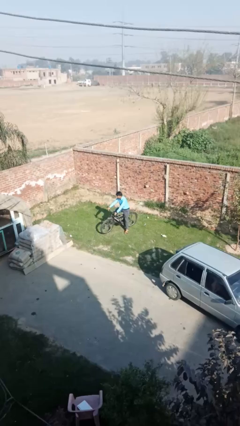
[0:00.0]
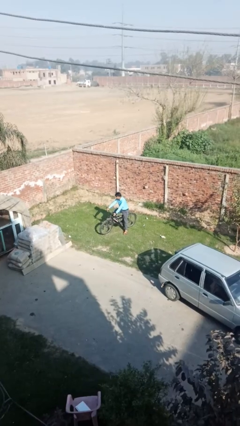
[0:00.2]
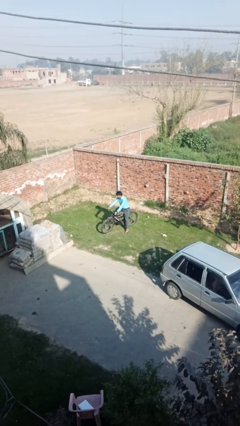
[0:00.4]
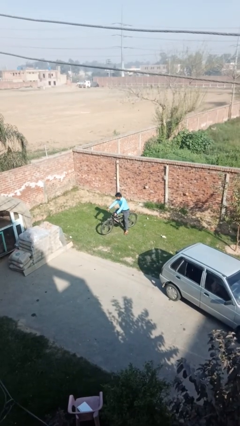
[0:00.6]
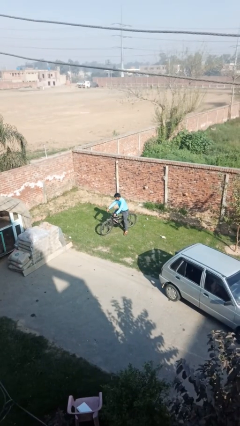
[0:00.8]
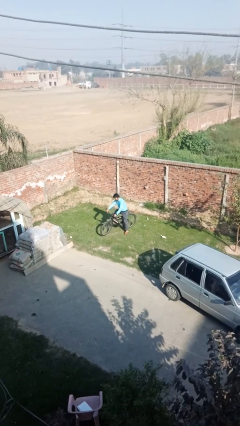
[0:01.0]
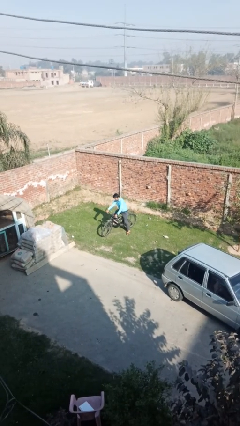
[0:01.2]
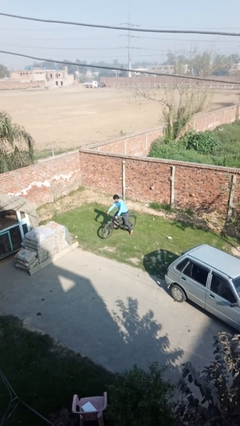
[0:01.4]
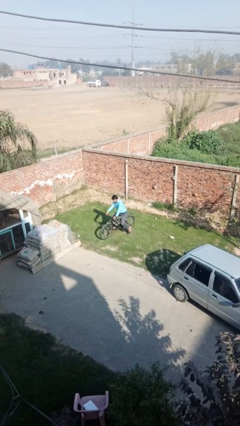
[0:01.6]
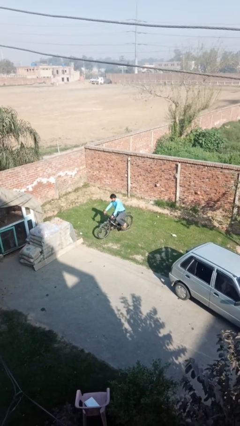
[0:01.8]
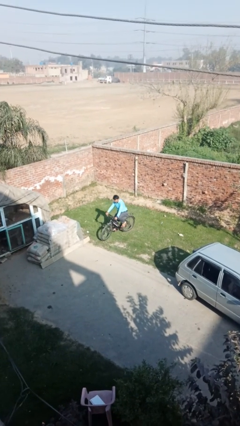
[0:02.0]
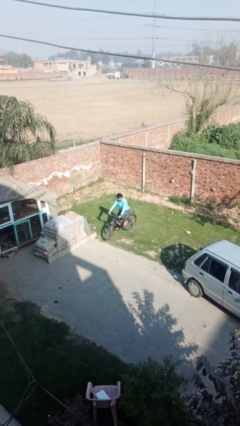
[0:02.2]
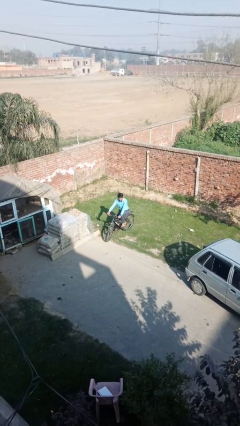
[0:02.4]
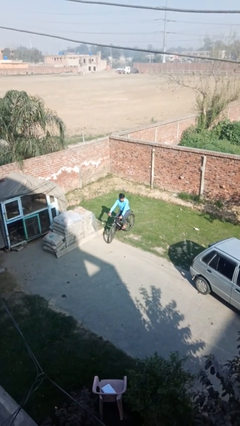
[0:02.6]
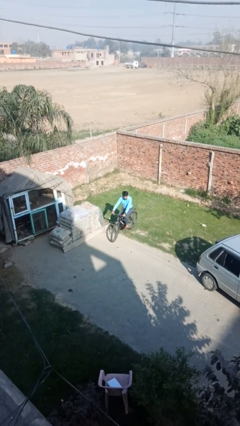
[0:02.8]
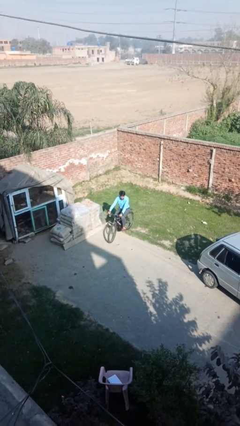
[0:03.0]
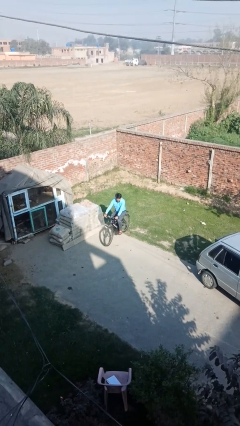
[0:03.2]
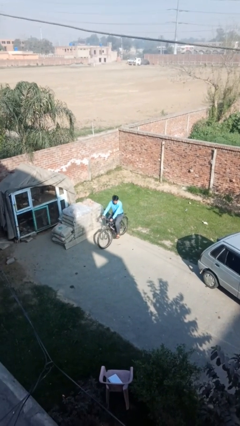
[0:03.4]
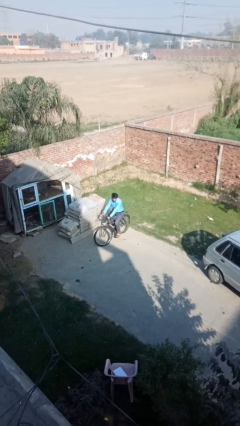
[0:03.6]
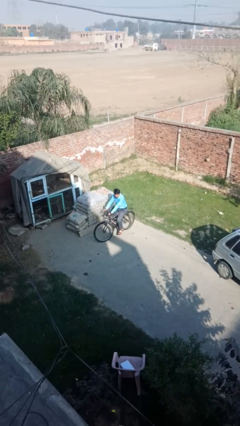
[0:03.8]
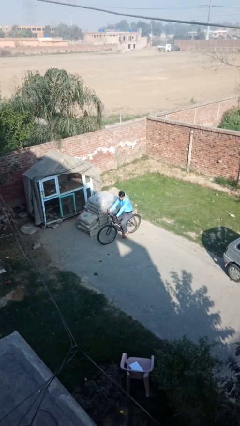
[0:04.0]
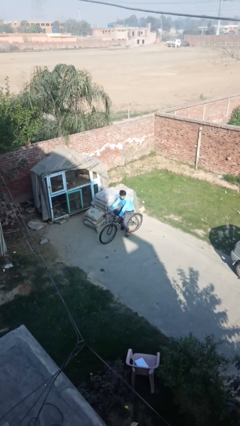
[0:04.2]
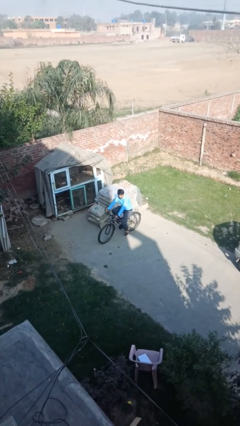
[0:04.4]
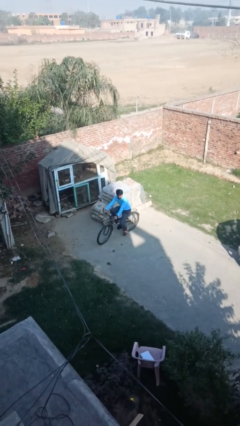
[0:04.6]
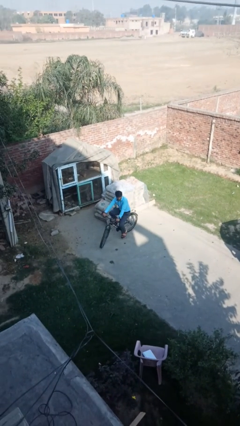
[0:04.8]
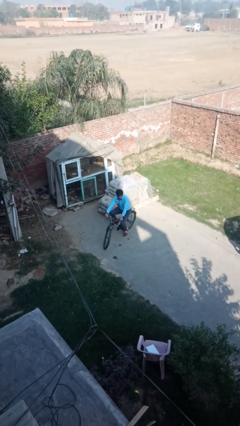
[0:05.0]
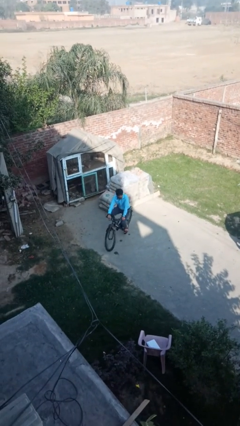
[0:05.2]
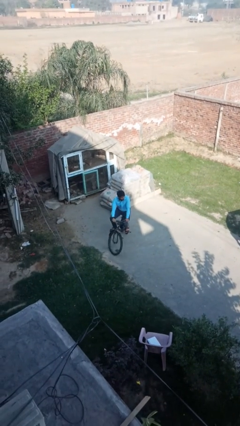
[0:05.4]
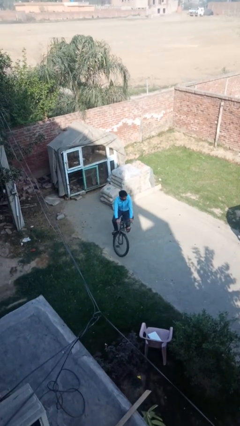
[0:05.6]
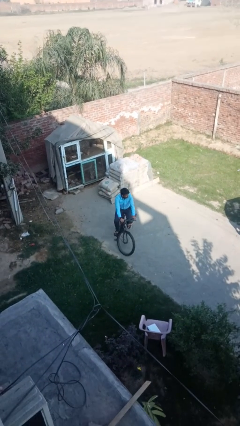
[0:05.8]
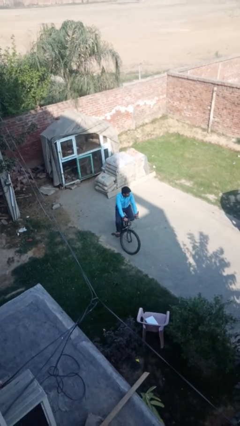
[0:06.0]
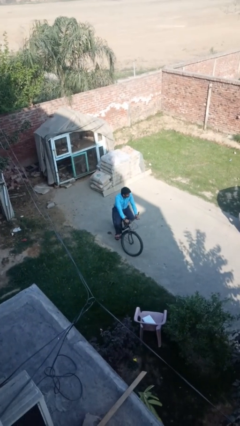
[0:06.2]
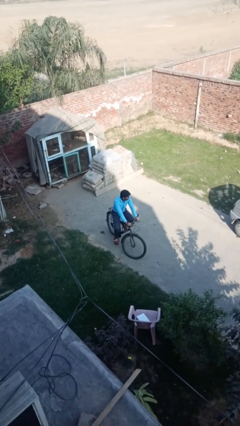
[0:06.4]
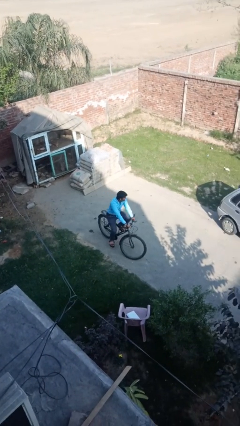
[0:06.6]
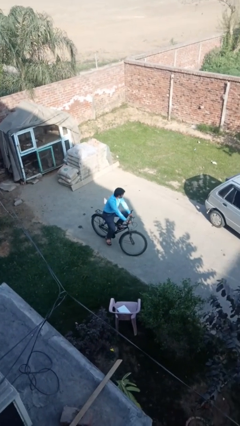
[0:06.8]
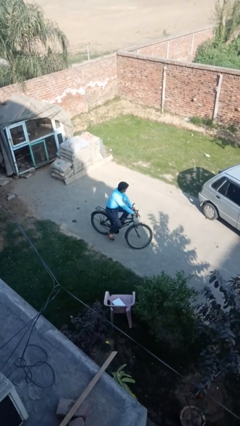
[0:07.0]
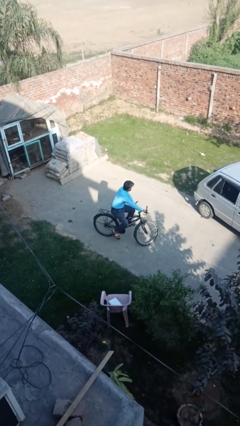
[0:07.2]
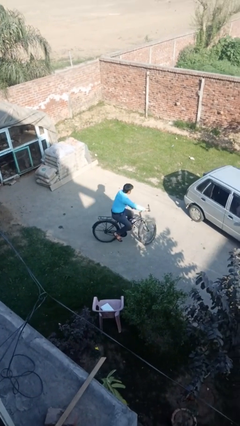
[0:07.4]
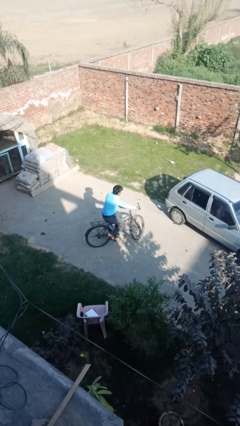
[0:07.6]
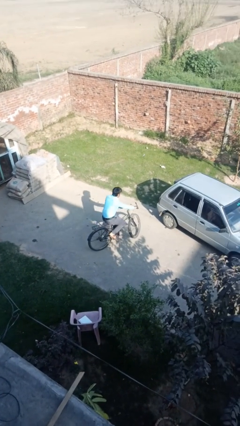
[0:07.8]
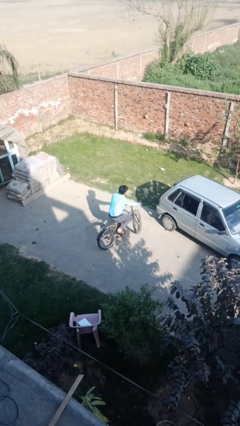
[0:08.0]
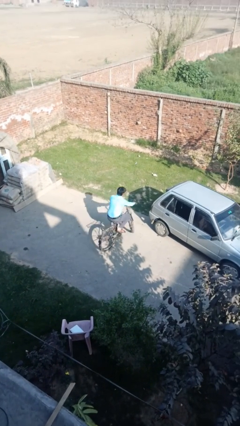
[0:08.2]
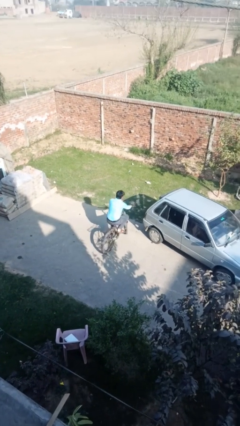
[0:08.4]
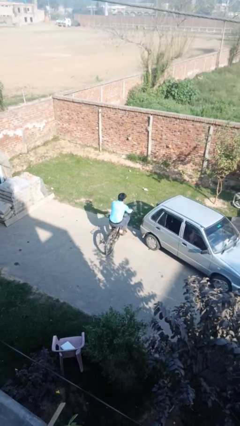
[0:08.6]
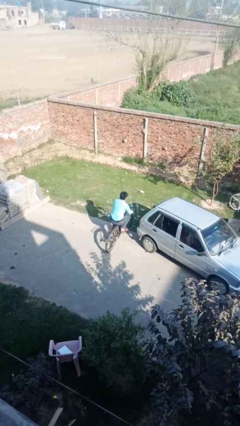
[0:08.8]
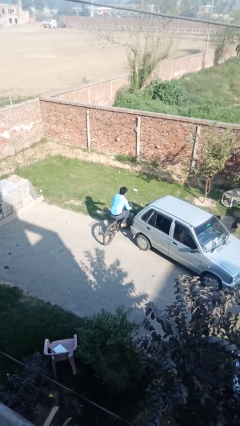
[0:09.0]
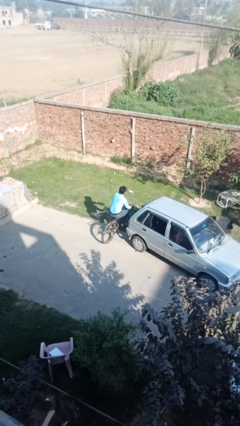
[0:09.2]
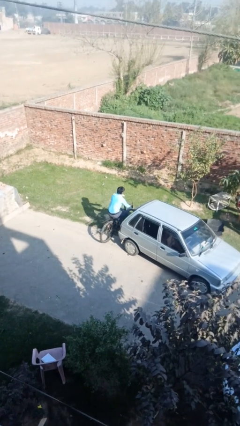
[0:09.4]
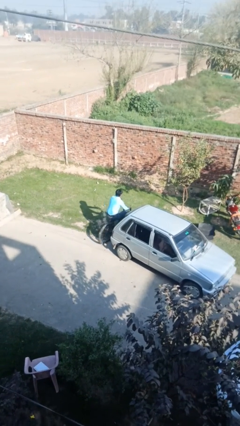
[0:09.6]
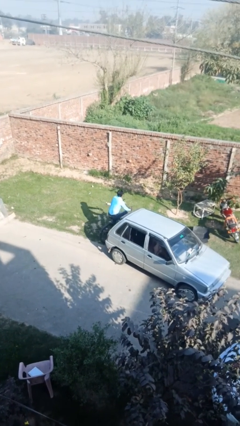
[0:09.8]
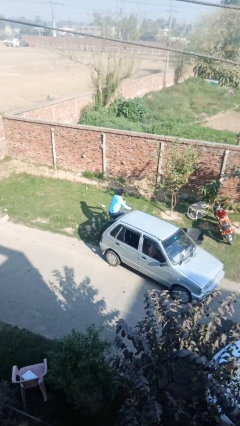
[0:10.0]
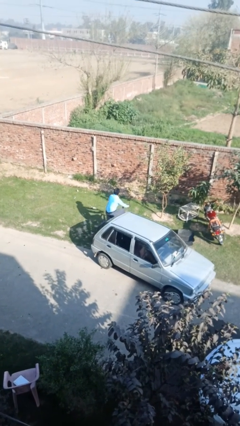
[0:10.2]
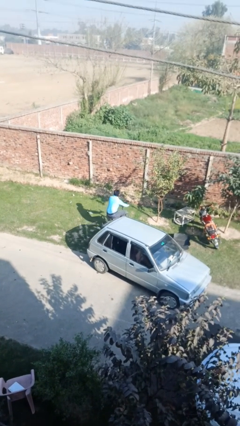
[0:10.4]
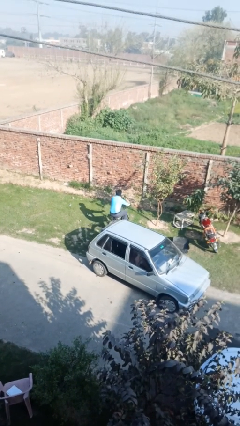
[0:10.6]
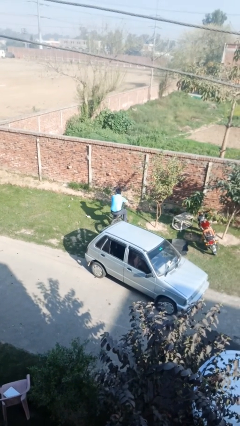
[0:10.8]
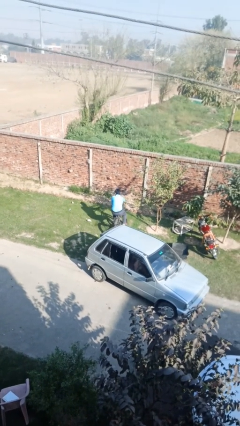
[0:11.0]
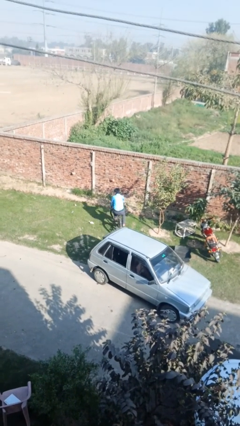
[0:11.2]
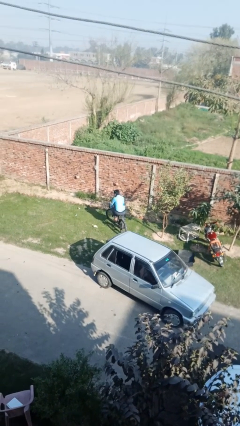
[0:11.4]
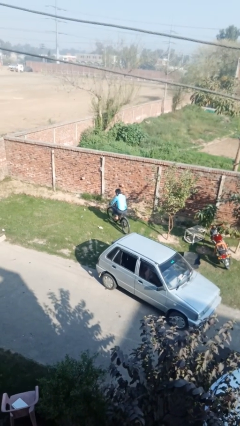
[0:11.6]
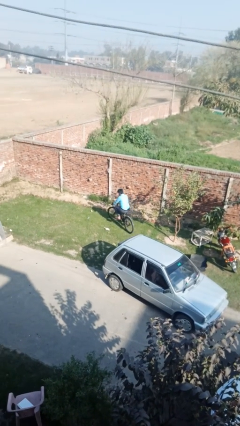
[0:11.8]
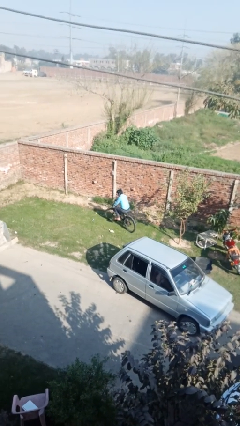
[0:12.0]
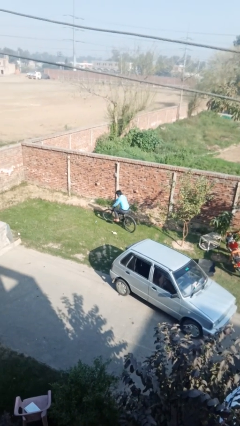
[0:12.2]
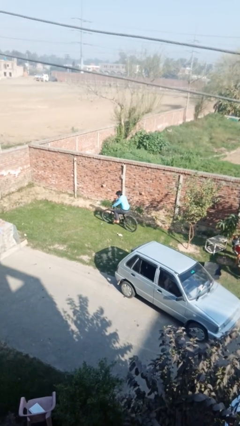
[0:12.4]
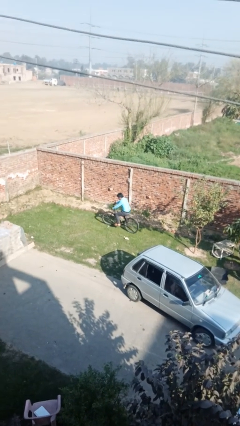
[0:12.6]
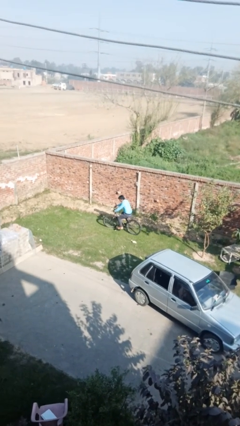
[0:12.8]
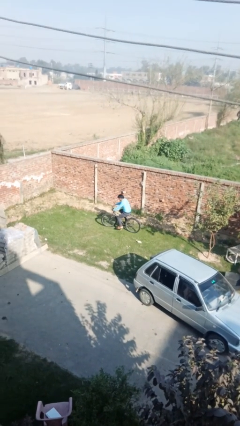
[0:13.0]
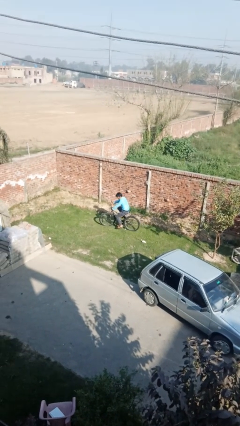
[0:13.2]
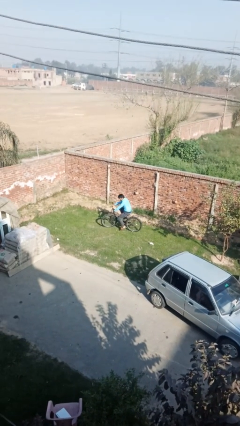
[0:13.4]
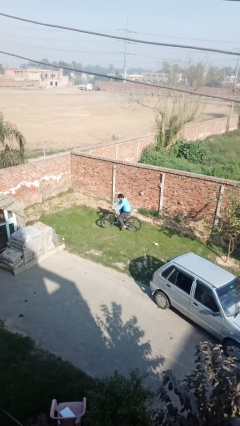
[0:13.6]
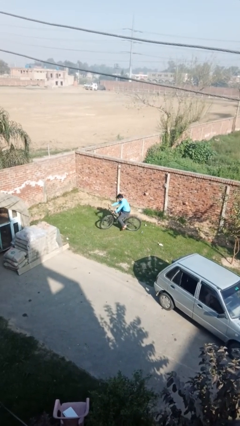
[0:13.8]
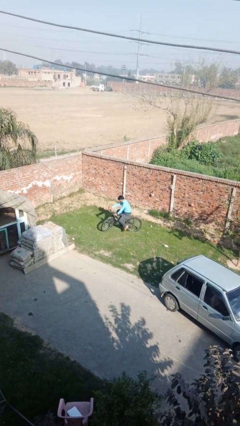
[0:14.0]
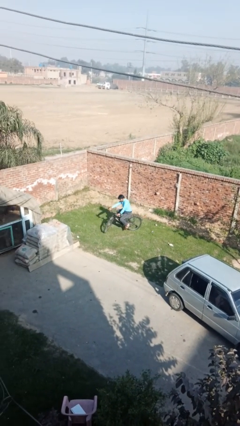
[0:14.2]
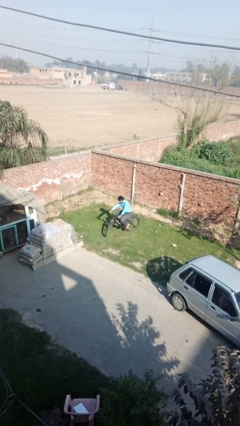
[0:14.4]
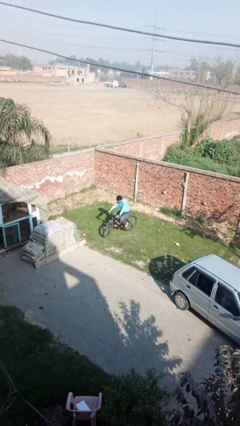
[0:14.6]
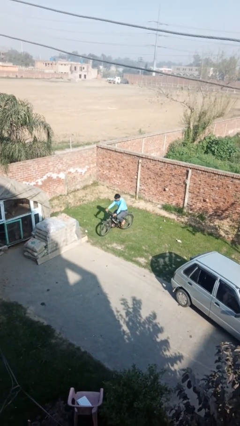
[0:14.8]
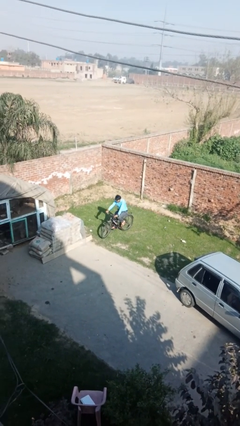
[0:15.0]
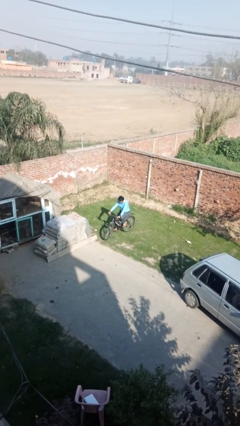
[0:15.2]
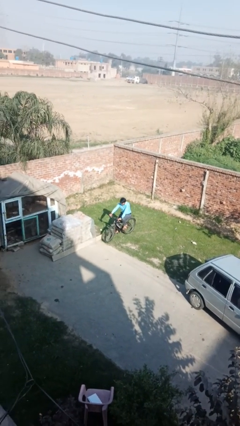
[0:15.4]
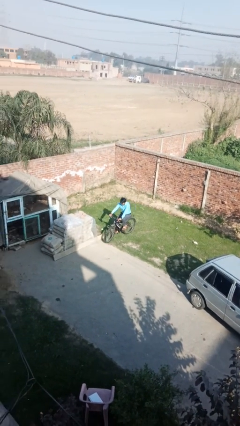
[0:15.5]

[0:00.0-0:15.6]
person rides bicycle

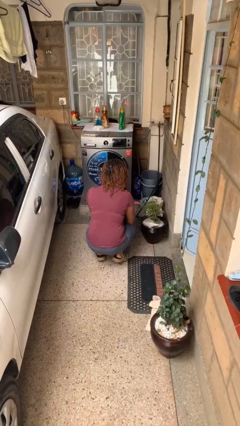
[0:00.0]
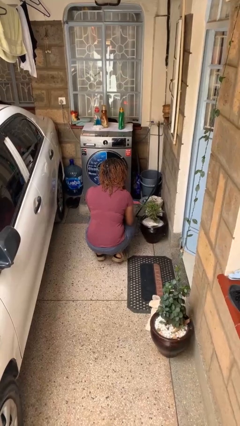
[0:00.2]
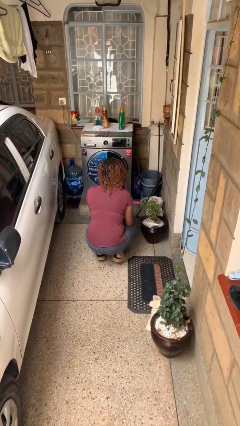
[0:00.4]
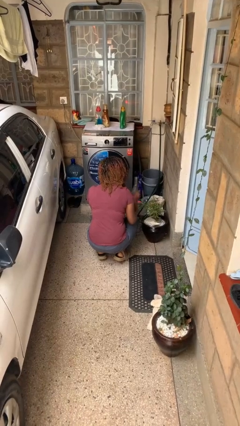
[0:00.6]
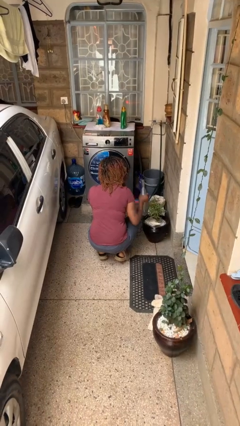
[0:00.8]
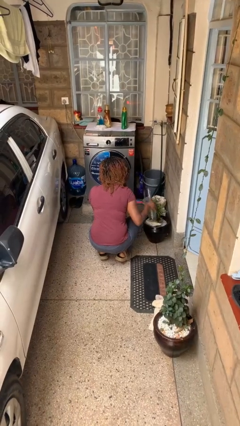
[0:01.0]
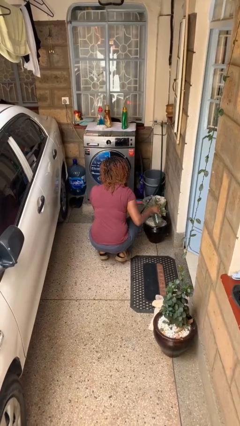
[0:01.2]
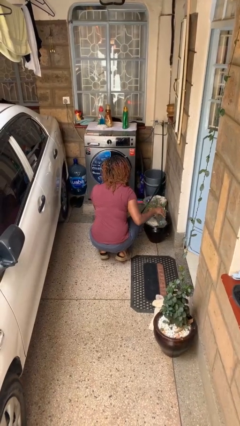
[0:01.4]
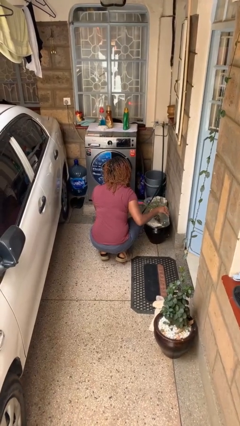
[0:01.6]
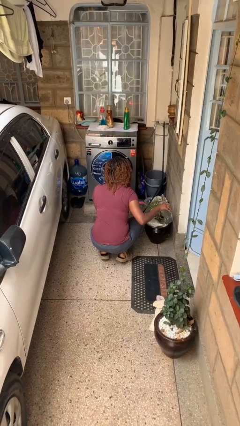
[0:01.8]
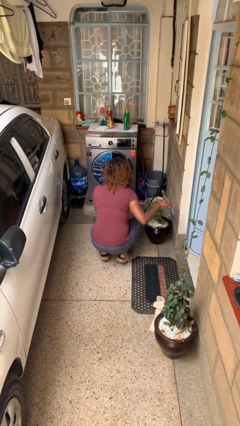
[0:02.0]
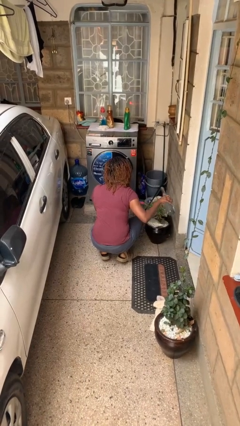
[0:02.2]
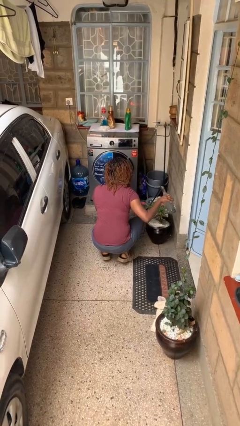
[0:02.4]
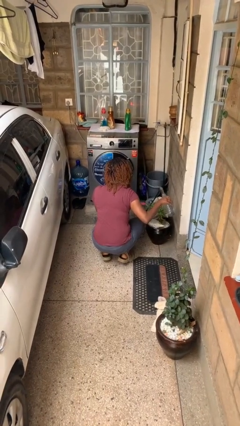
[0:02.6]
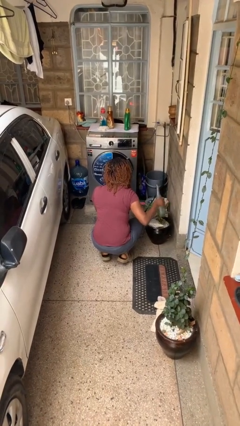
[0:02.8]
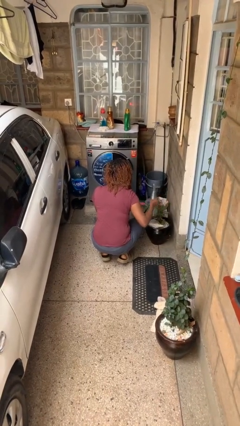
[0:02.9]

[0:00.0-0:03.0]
person waters houseplant
